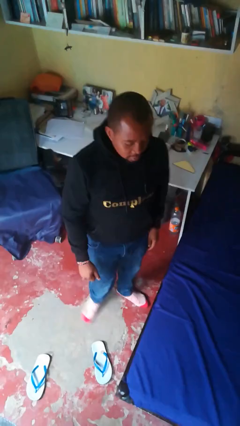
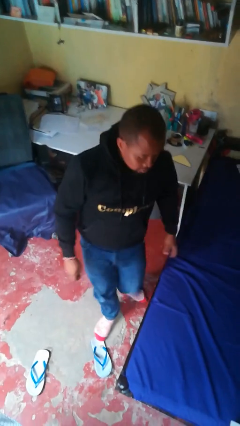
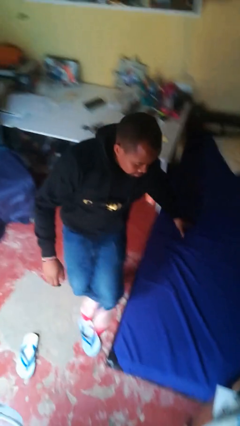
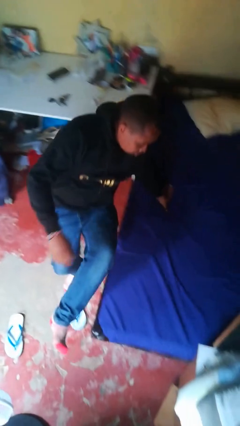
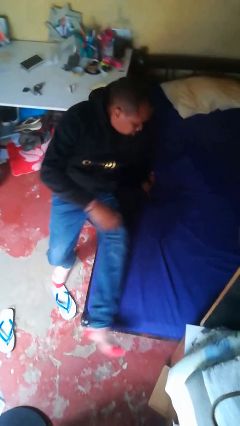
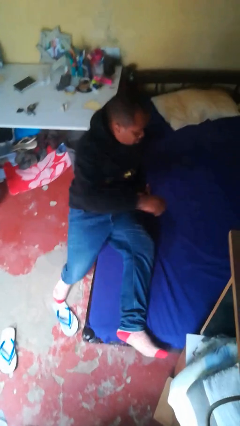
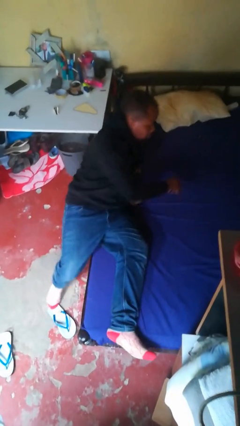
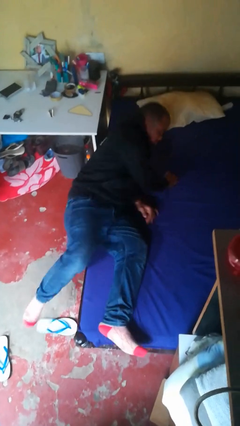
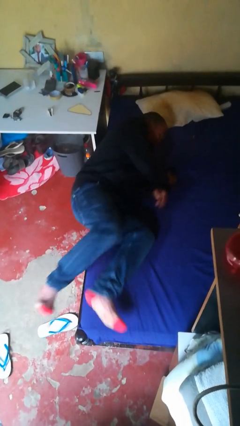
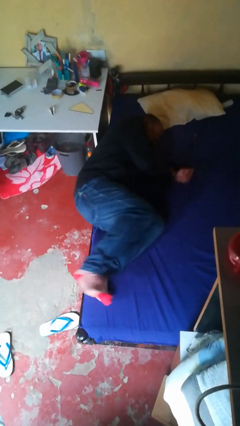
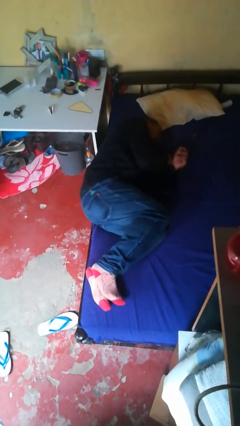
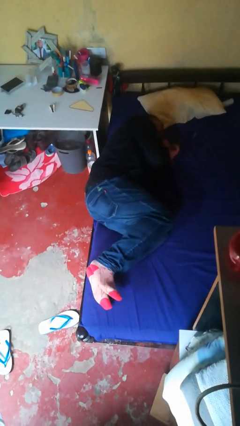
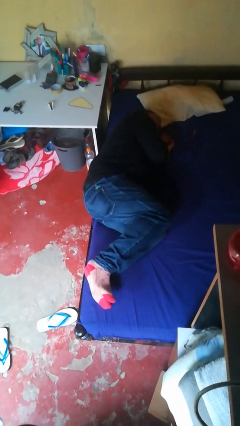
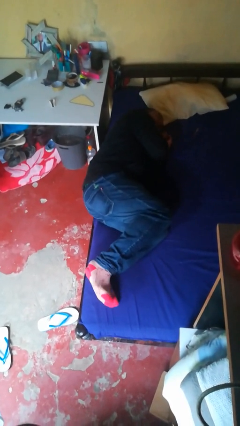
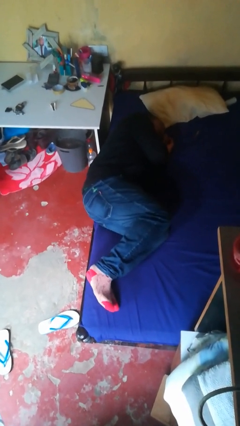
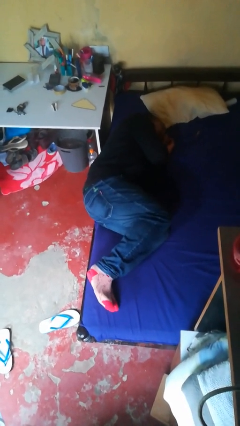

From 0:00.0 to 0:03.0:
person lies down on bed

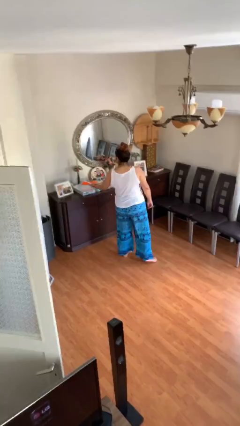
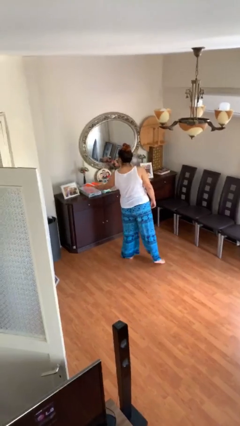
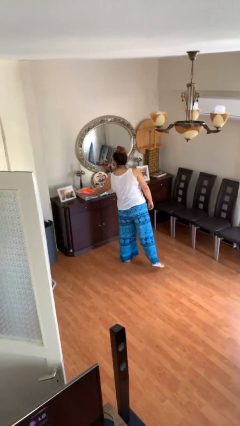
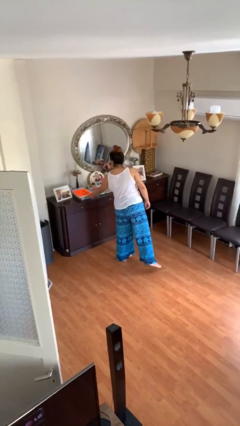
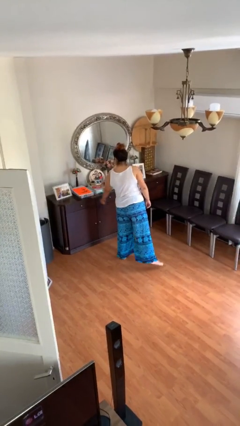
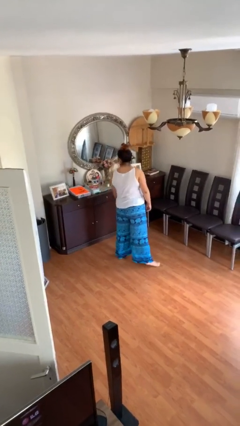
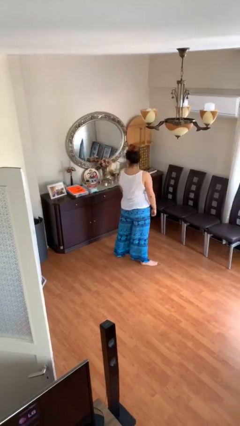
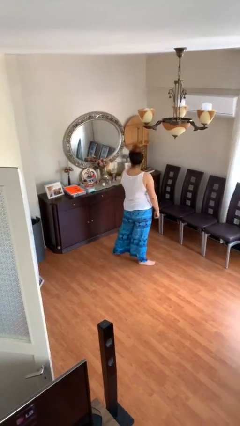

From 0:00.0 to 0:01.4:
person puts down object on table

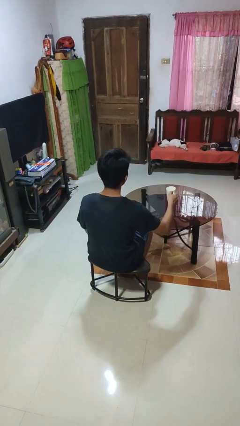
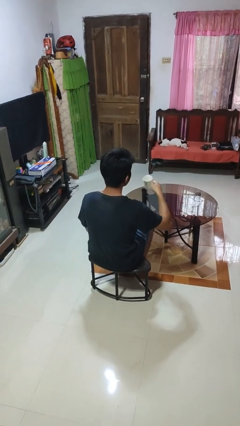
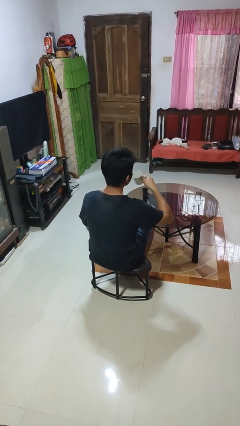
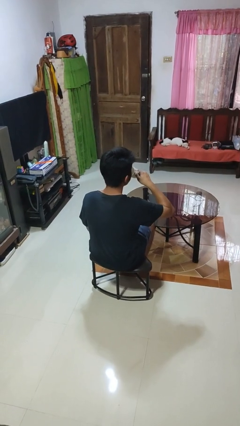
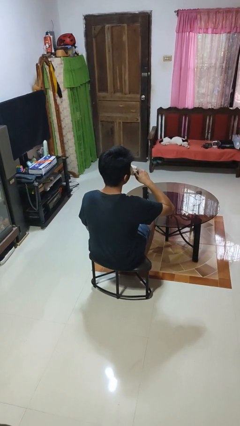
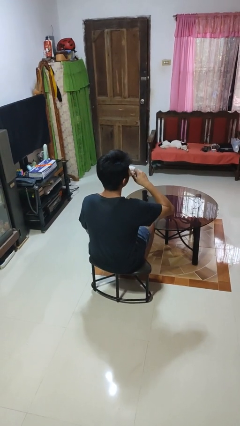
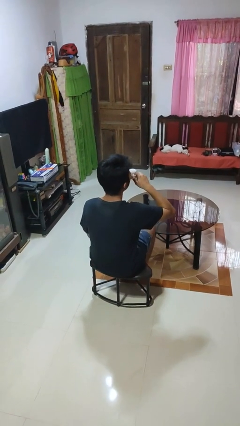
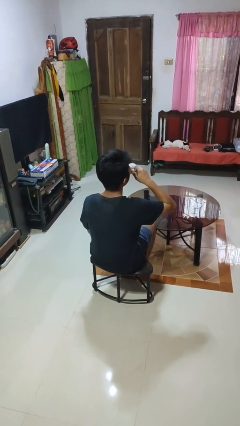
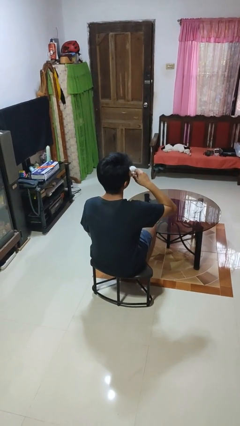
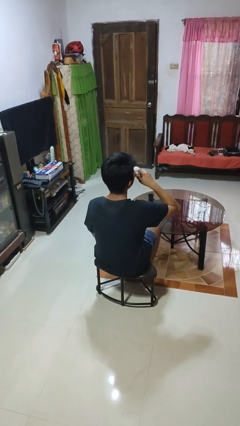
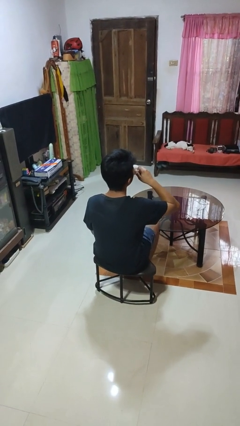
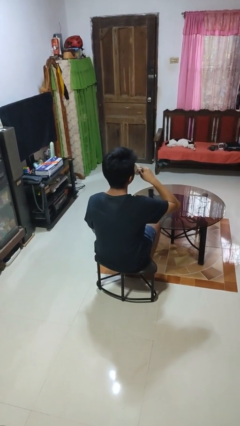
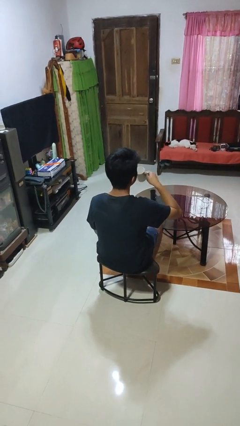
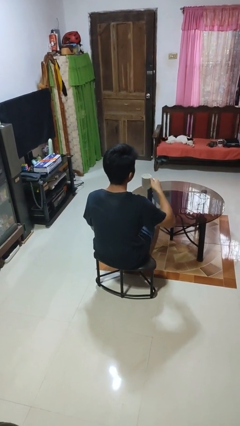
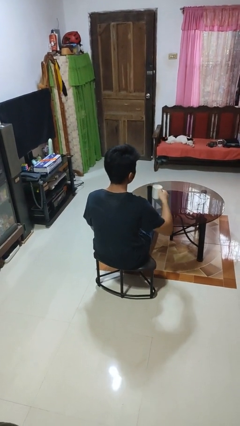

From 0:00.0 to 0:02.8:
person drinks from mug

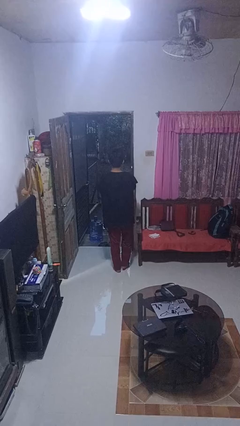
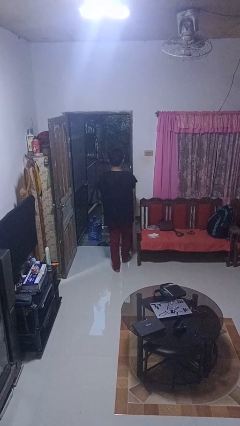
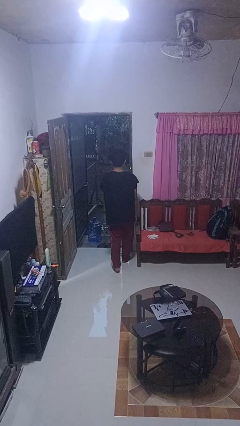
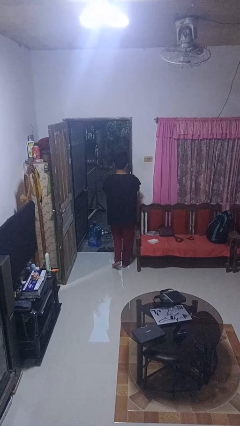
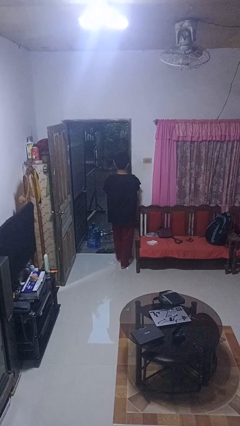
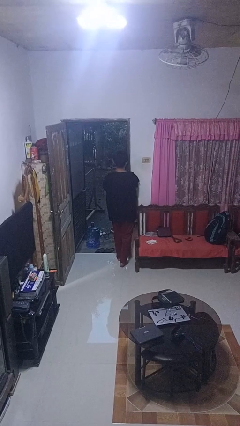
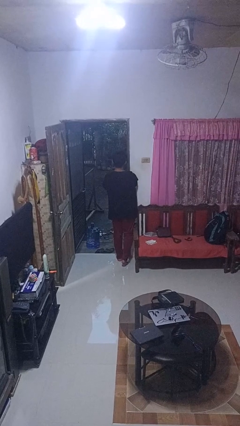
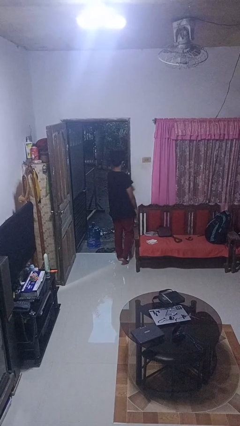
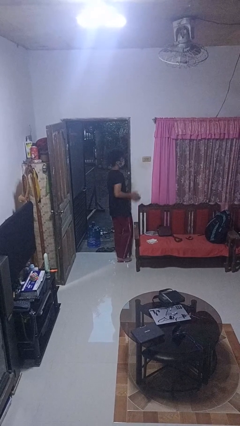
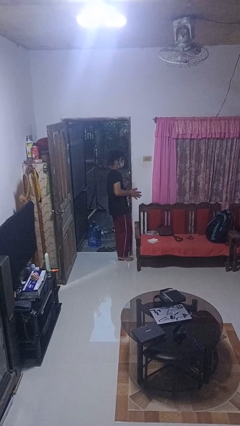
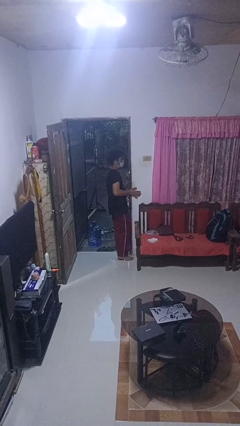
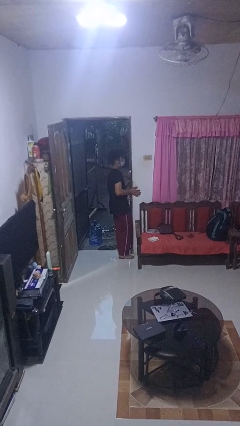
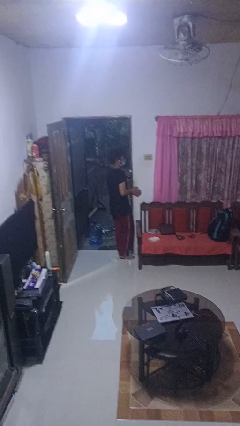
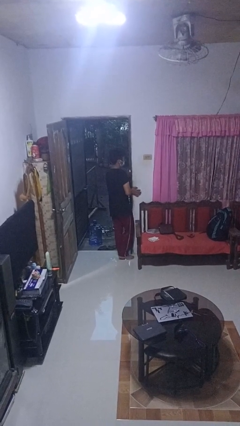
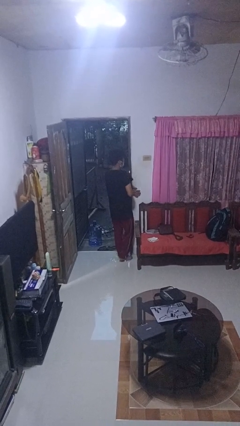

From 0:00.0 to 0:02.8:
person bumps into wall

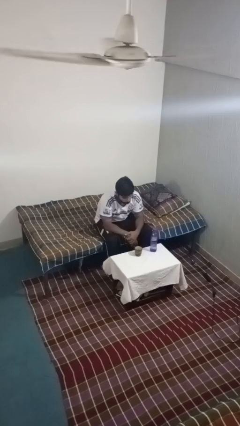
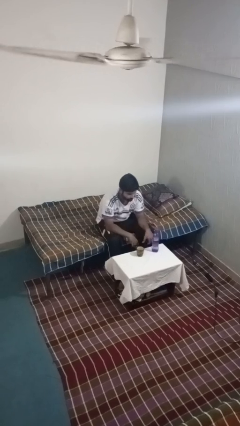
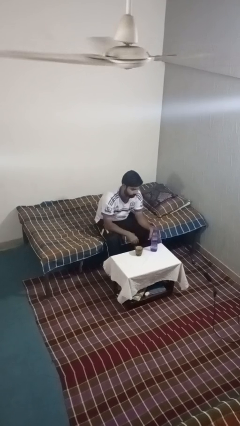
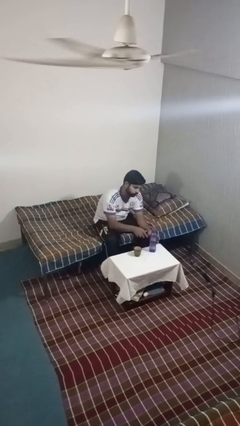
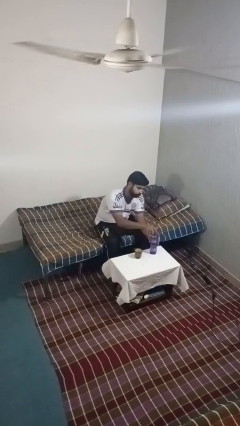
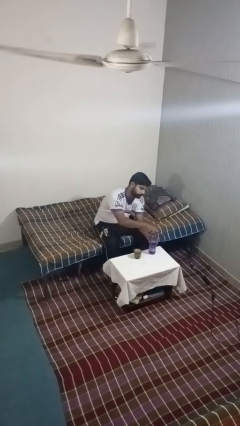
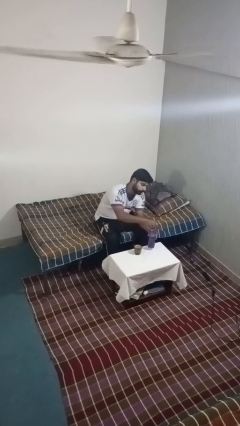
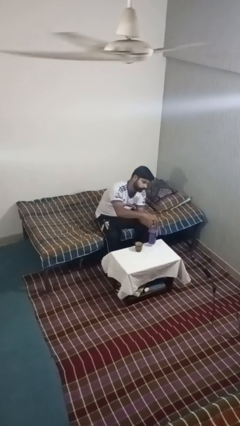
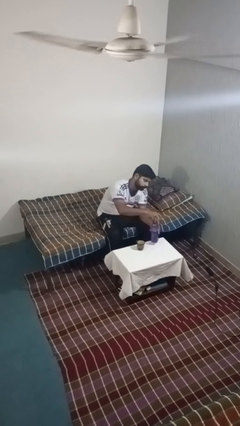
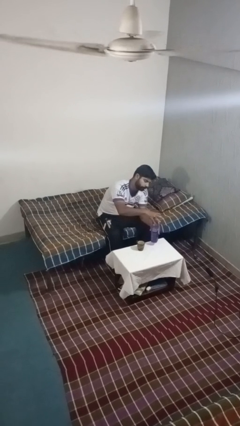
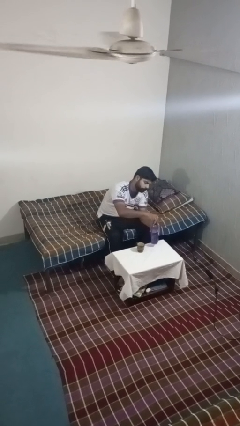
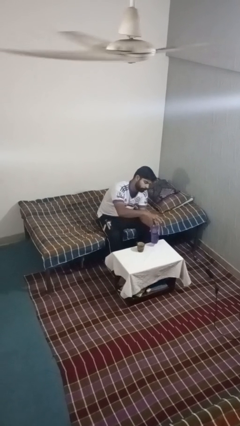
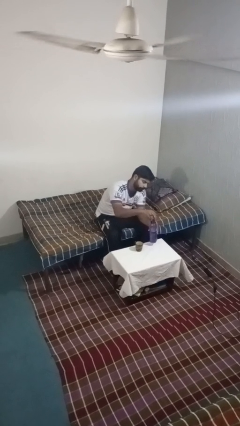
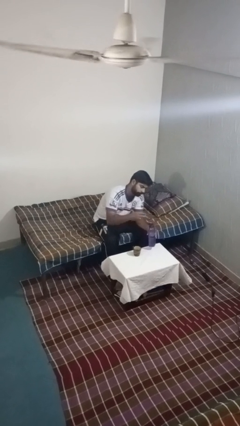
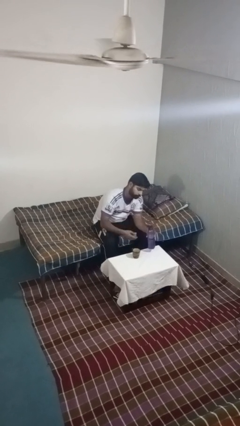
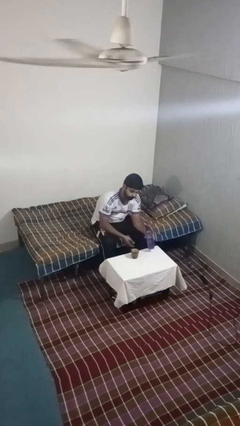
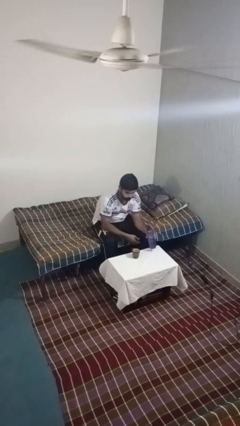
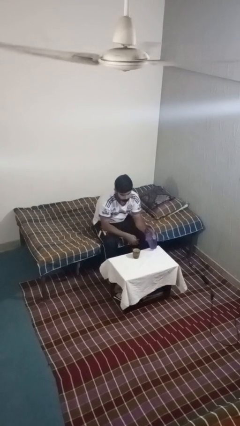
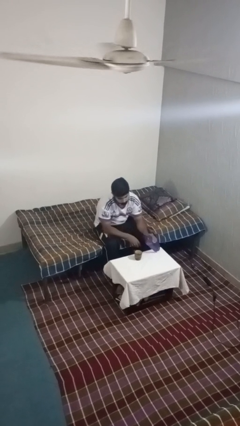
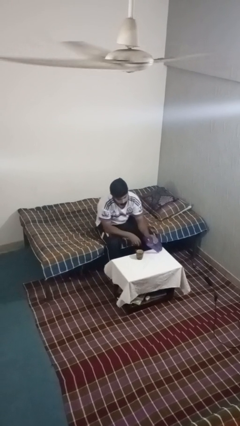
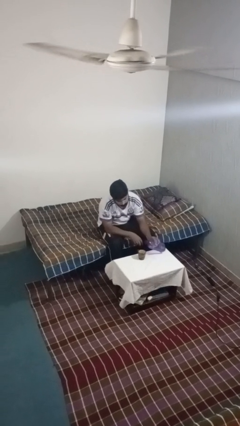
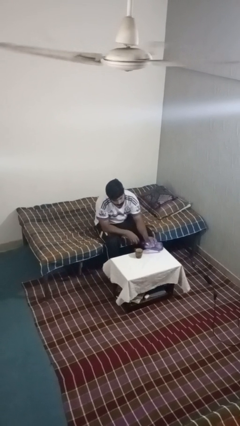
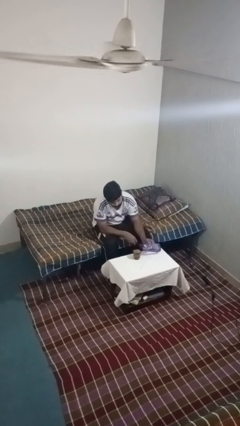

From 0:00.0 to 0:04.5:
person unscrews lid from bottle

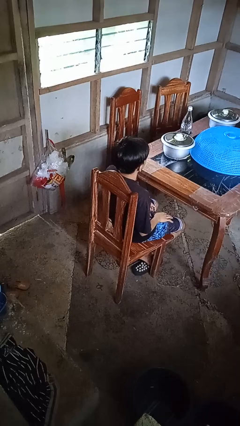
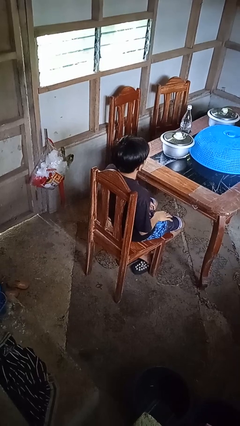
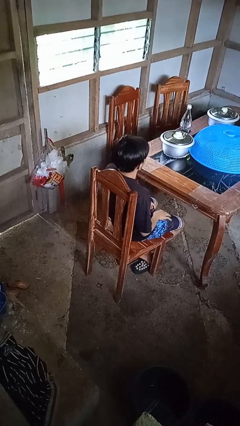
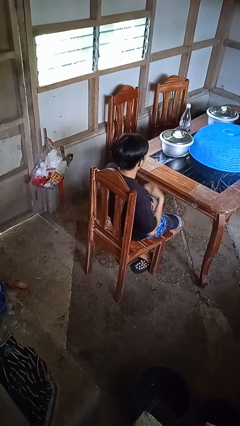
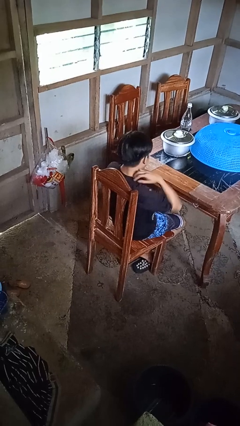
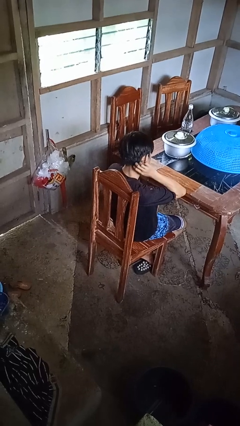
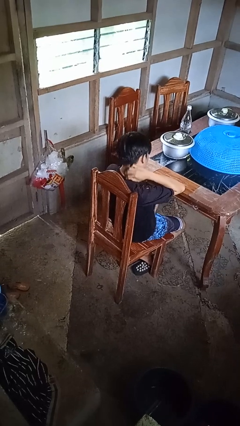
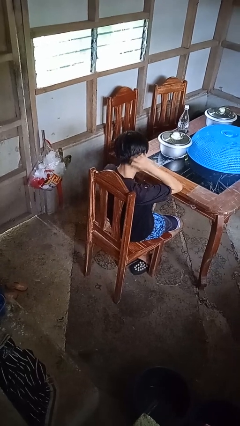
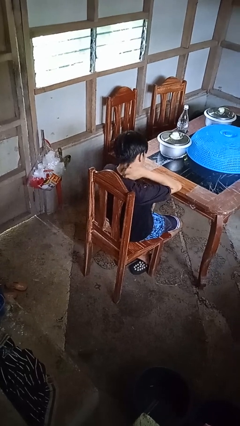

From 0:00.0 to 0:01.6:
person rubs neck

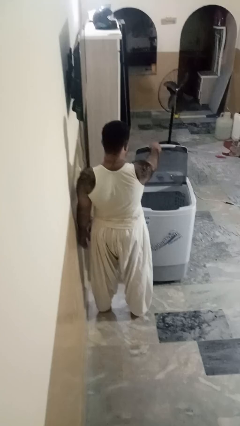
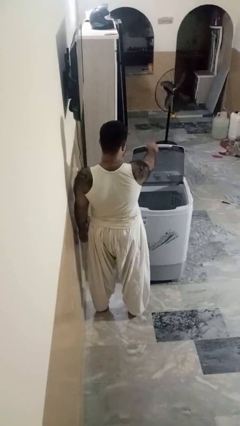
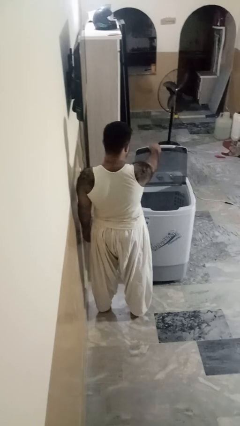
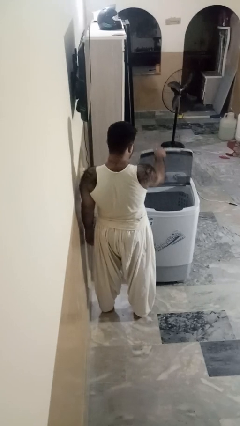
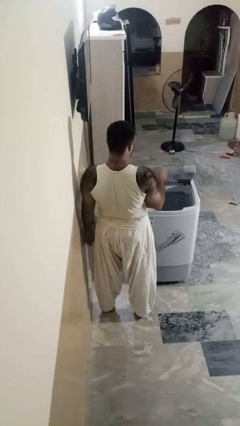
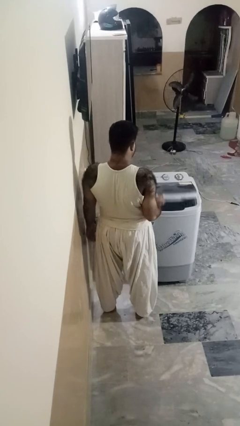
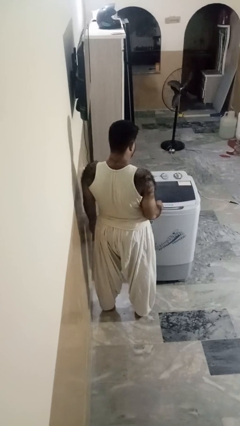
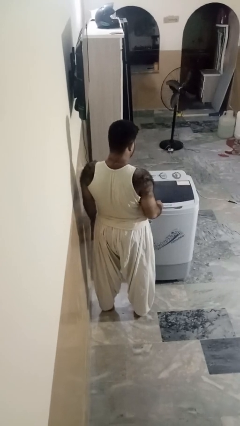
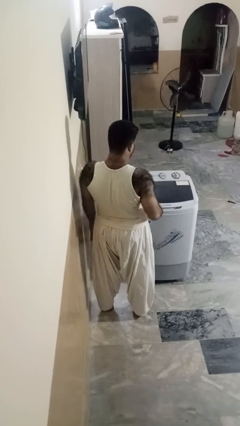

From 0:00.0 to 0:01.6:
person closes clothes washer
